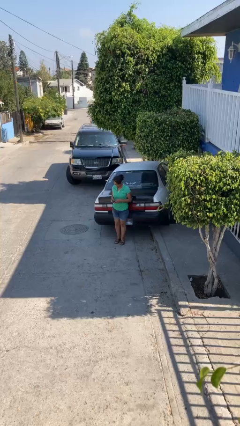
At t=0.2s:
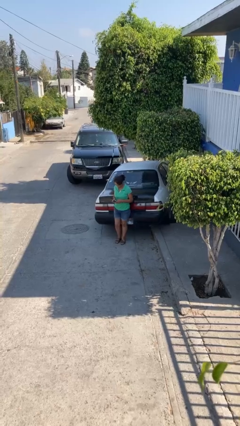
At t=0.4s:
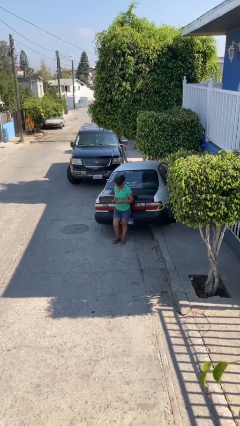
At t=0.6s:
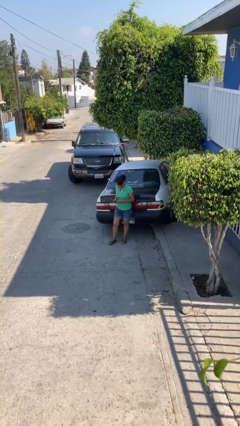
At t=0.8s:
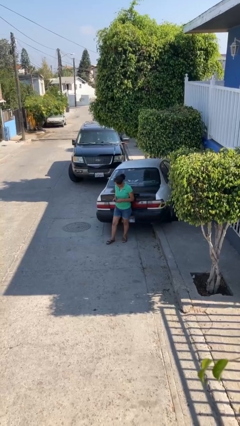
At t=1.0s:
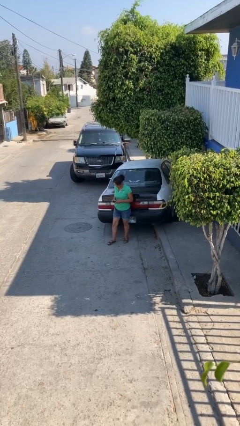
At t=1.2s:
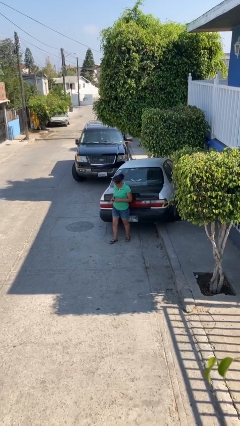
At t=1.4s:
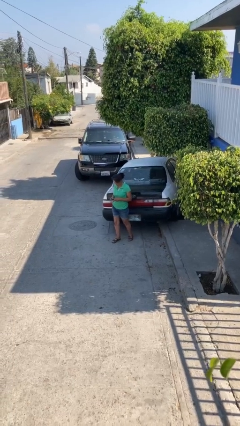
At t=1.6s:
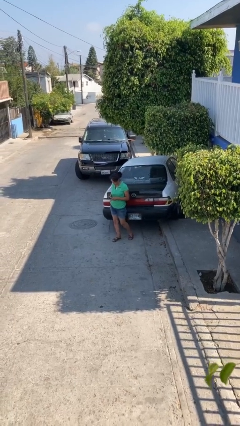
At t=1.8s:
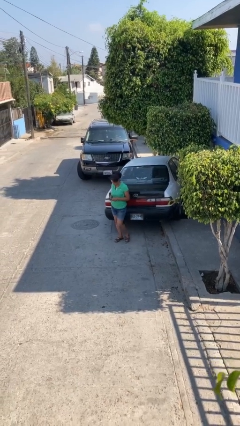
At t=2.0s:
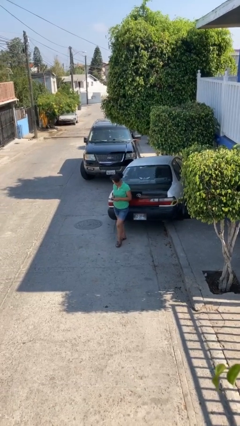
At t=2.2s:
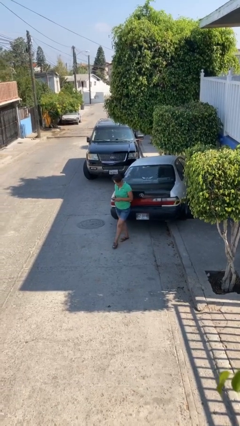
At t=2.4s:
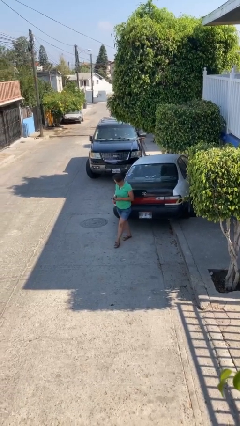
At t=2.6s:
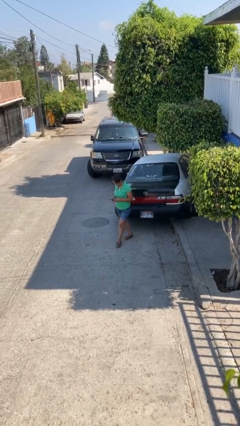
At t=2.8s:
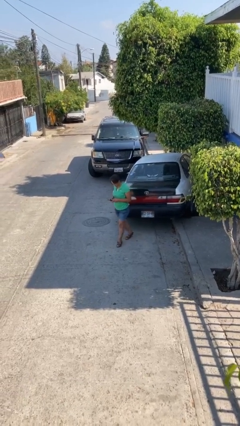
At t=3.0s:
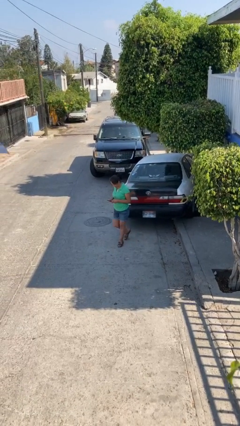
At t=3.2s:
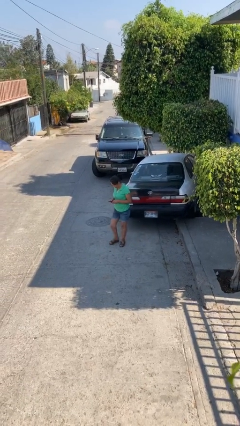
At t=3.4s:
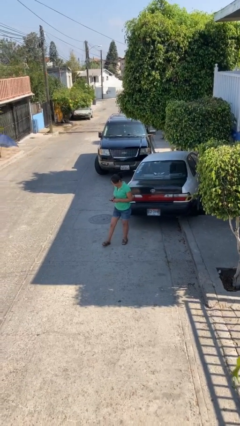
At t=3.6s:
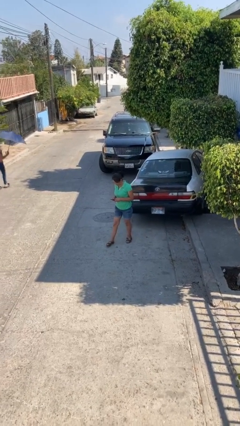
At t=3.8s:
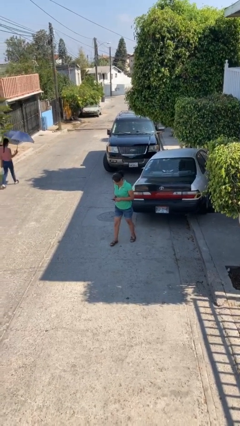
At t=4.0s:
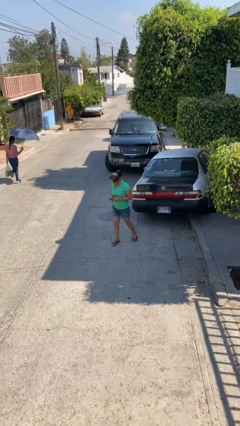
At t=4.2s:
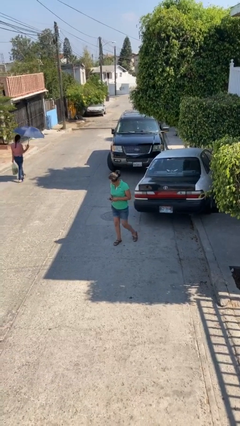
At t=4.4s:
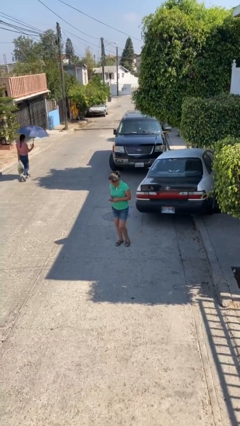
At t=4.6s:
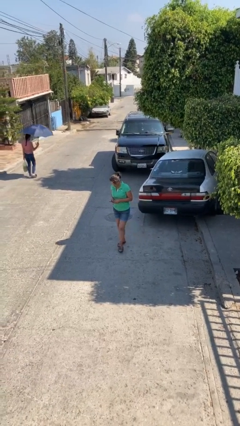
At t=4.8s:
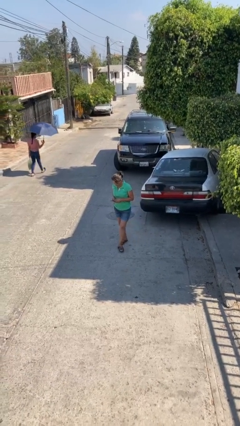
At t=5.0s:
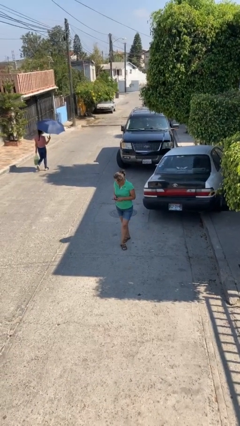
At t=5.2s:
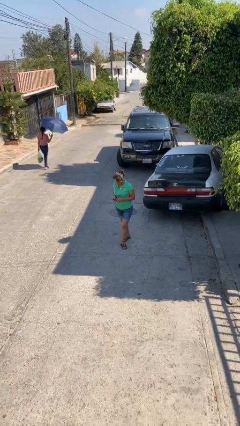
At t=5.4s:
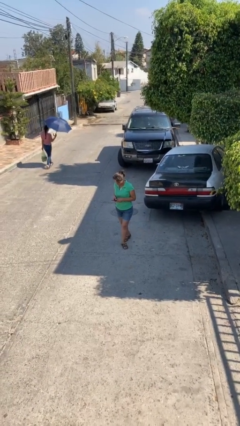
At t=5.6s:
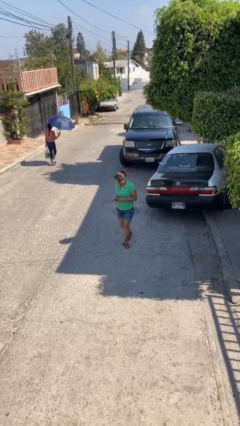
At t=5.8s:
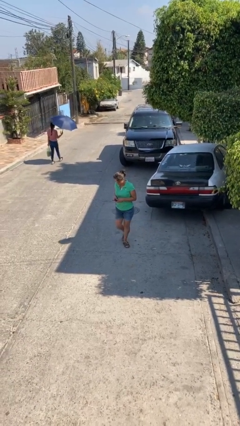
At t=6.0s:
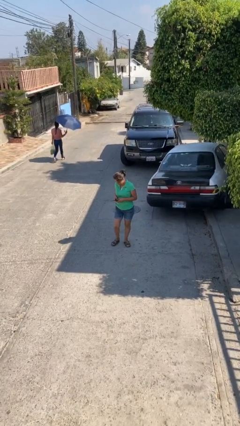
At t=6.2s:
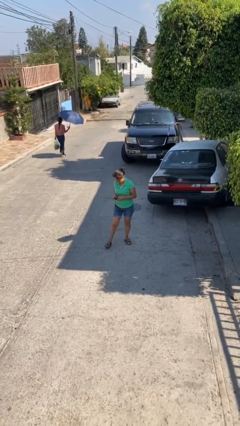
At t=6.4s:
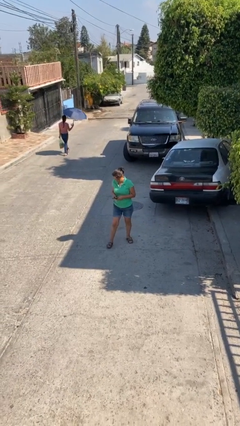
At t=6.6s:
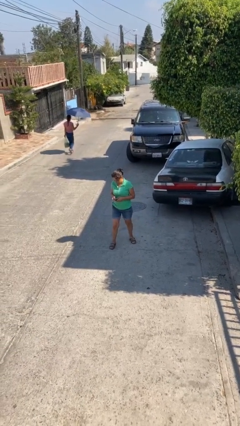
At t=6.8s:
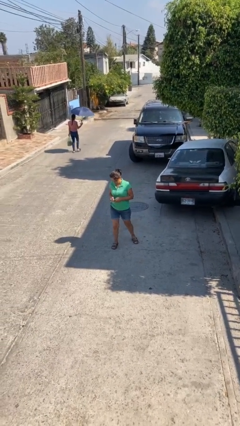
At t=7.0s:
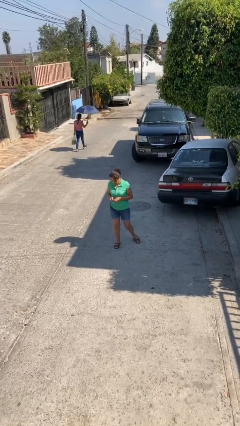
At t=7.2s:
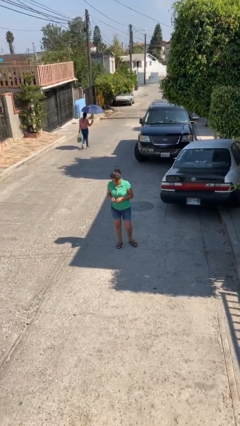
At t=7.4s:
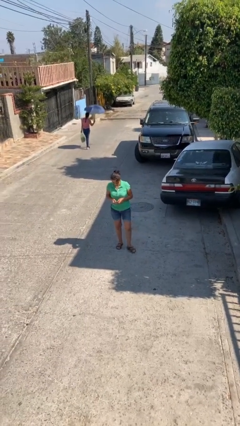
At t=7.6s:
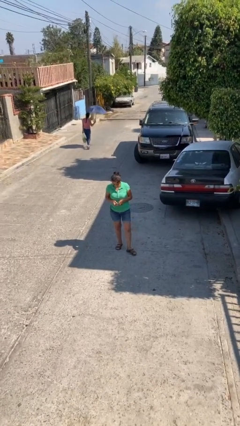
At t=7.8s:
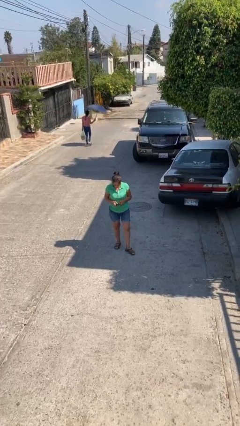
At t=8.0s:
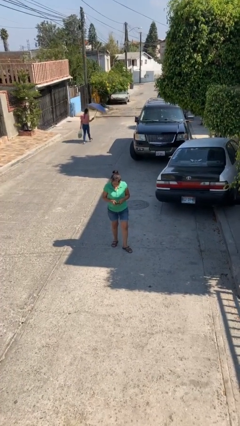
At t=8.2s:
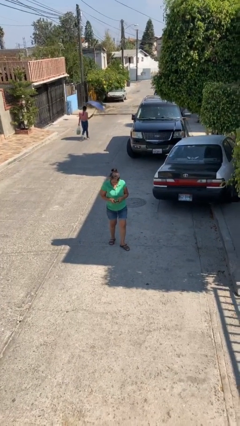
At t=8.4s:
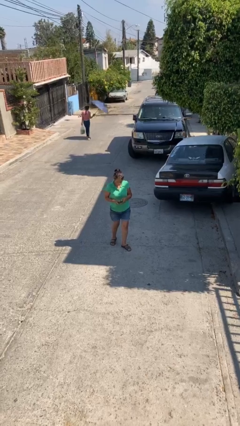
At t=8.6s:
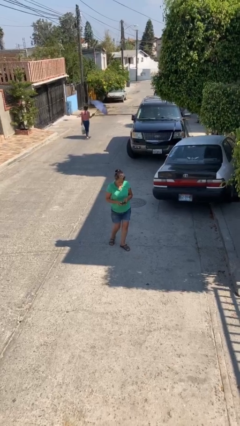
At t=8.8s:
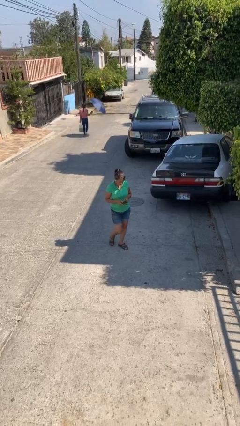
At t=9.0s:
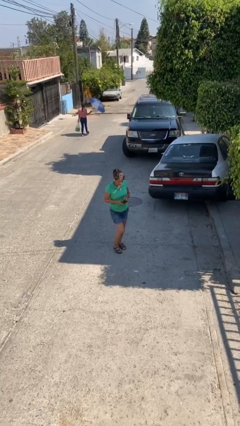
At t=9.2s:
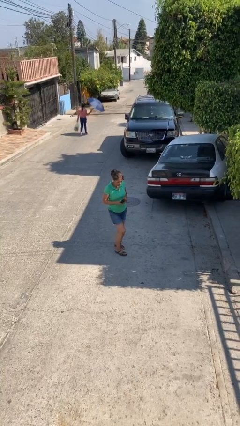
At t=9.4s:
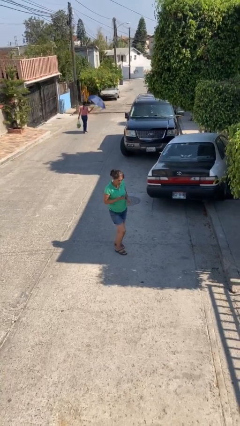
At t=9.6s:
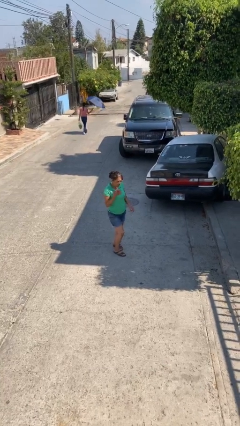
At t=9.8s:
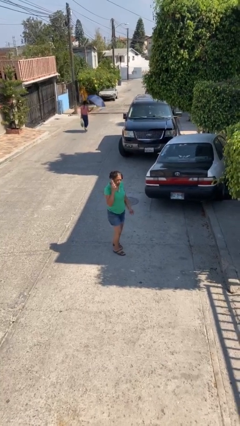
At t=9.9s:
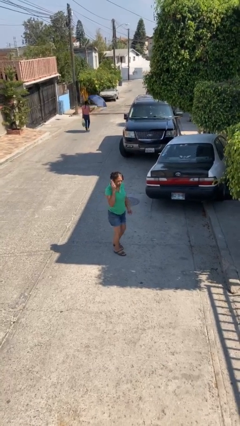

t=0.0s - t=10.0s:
person texts on phone

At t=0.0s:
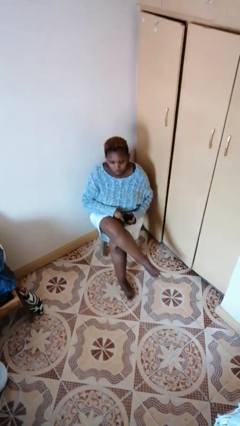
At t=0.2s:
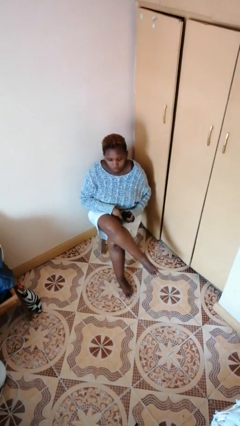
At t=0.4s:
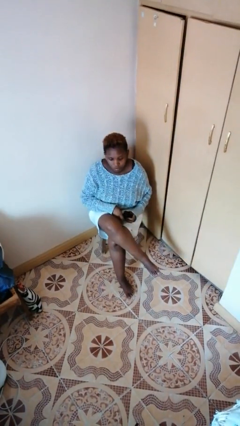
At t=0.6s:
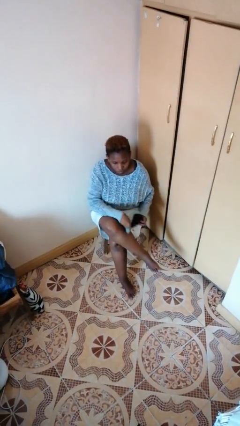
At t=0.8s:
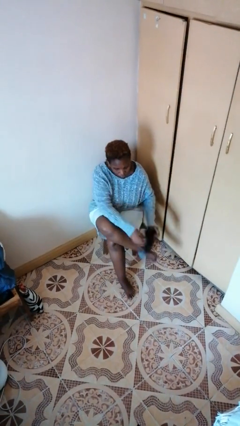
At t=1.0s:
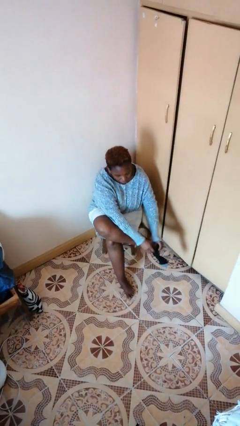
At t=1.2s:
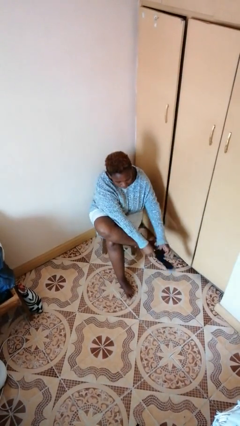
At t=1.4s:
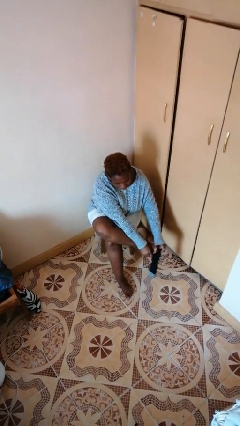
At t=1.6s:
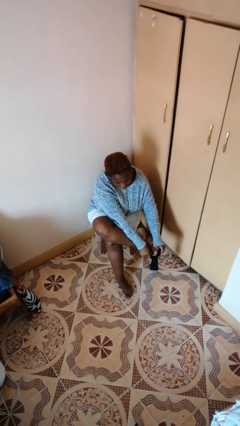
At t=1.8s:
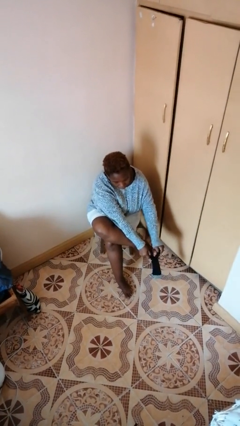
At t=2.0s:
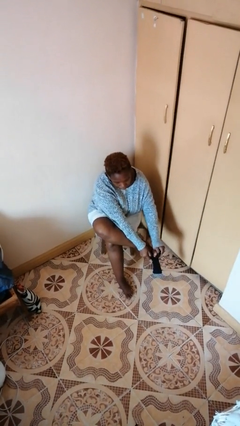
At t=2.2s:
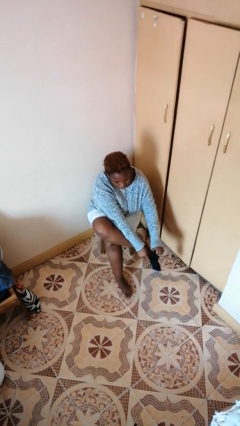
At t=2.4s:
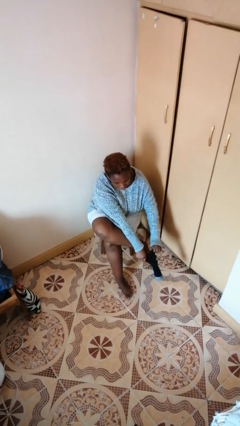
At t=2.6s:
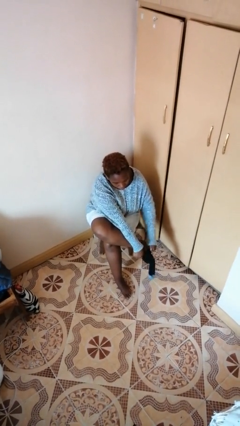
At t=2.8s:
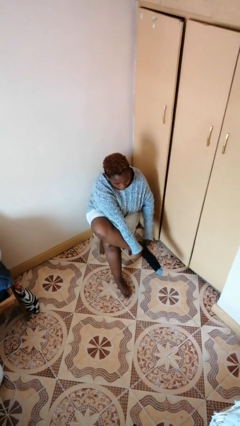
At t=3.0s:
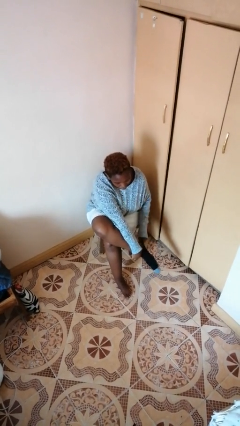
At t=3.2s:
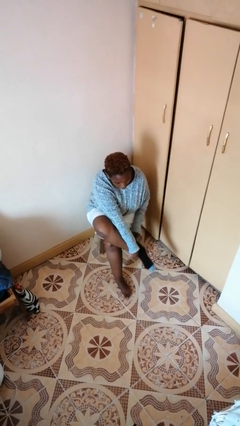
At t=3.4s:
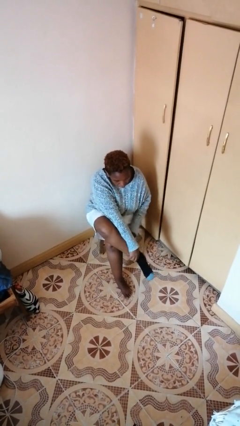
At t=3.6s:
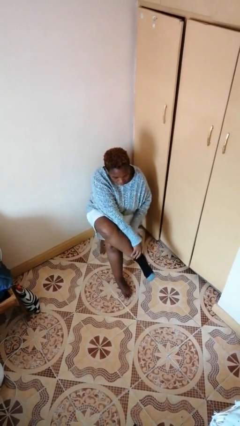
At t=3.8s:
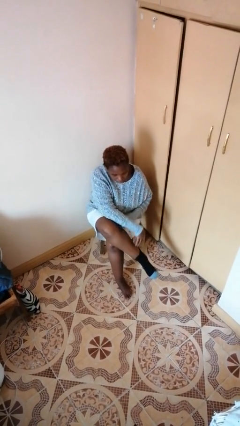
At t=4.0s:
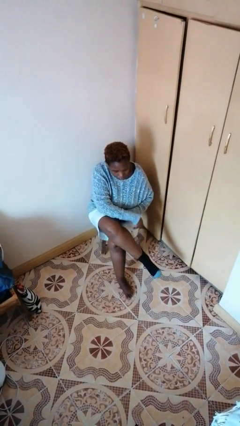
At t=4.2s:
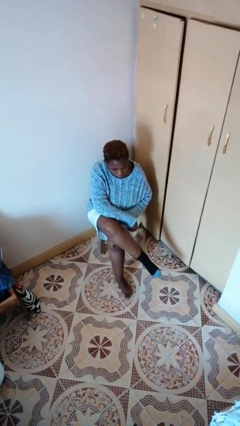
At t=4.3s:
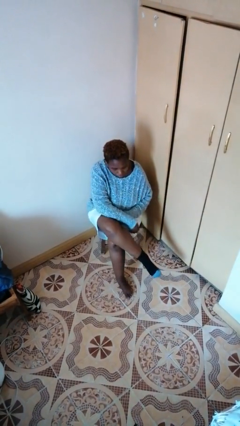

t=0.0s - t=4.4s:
person puts on socks

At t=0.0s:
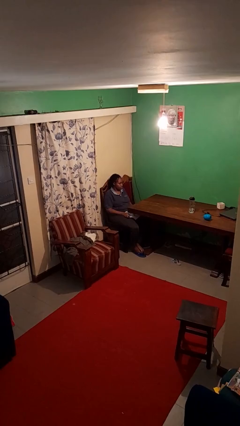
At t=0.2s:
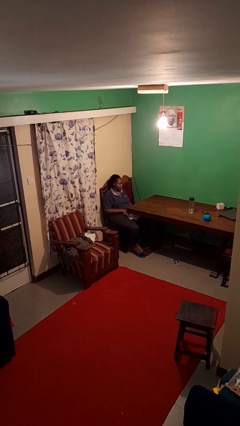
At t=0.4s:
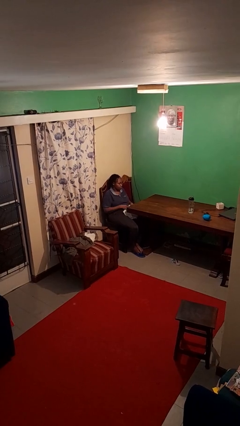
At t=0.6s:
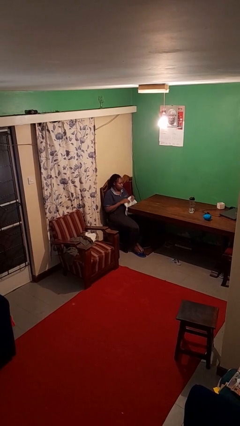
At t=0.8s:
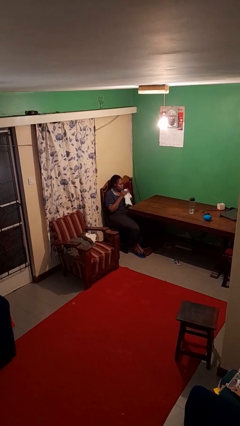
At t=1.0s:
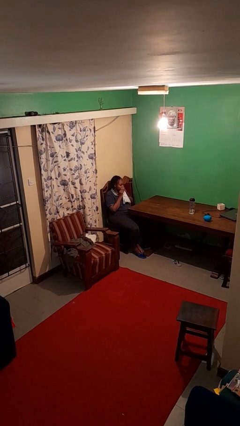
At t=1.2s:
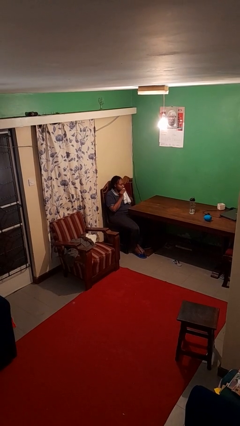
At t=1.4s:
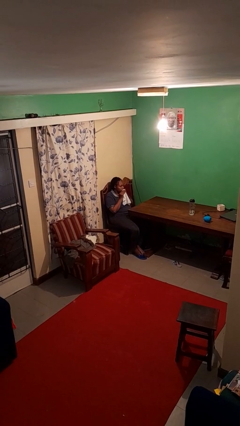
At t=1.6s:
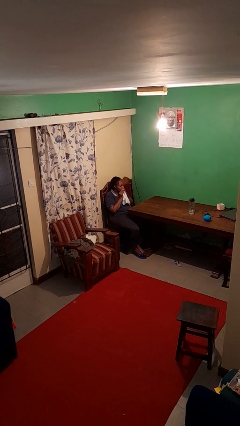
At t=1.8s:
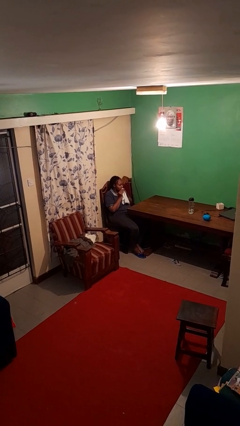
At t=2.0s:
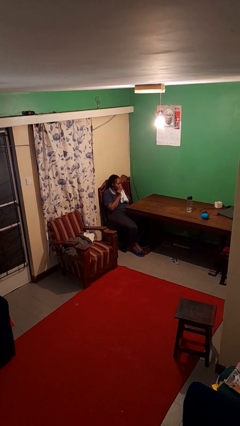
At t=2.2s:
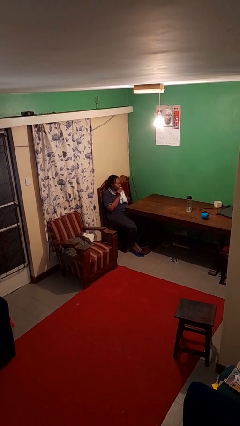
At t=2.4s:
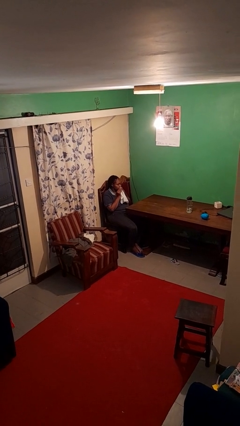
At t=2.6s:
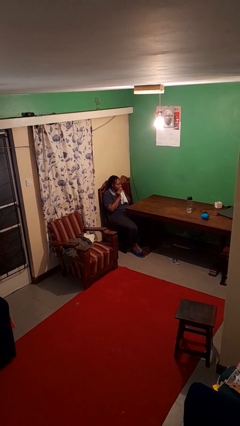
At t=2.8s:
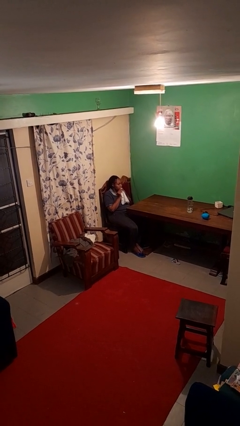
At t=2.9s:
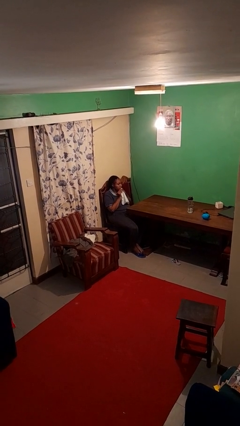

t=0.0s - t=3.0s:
person wipes mouth with napkin

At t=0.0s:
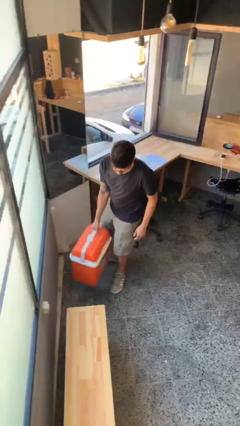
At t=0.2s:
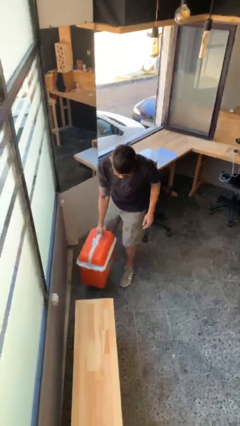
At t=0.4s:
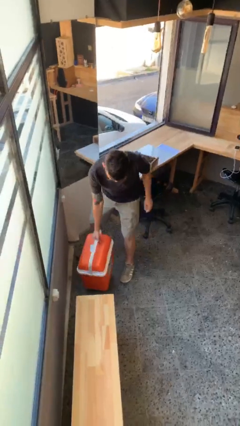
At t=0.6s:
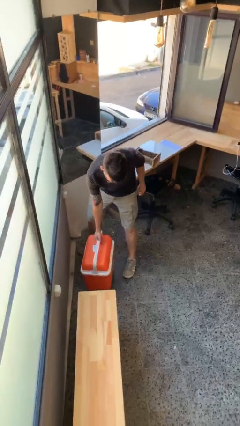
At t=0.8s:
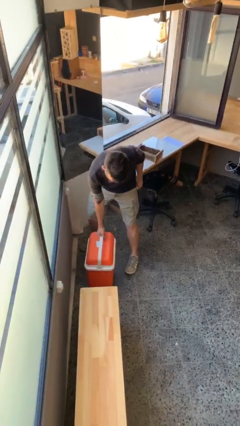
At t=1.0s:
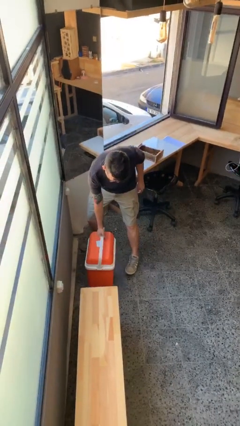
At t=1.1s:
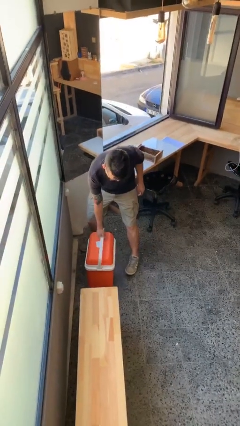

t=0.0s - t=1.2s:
person puts down object on floor
